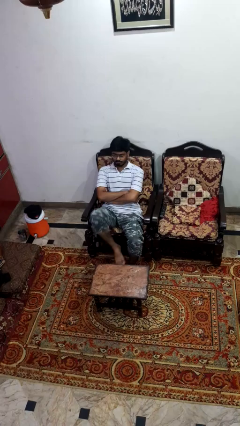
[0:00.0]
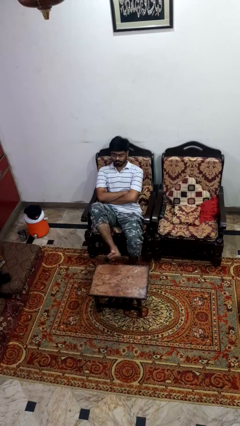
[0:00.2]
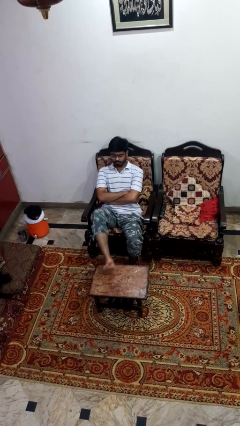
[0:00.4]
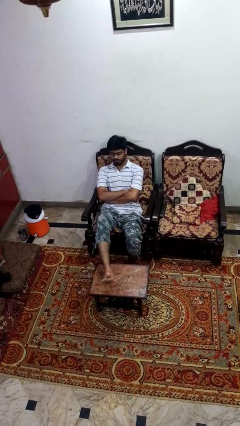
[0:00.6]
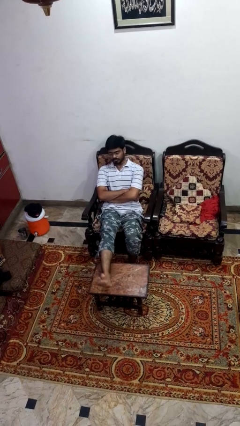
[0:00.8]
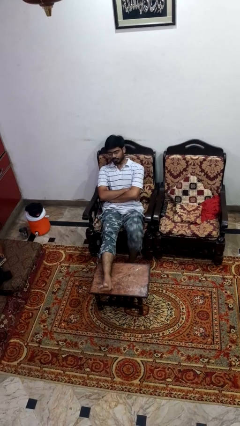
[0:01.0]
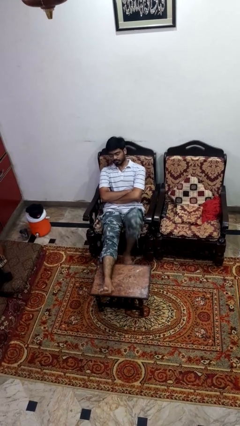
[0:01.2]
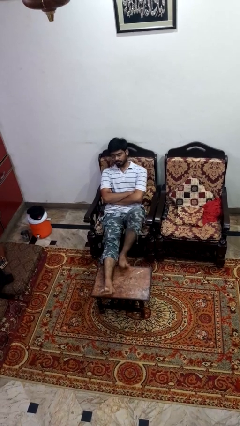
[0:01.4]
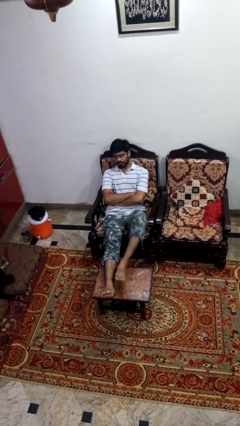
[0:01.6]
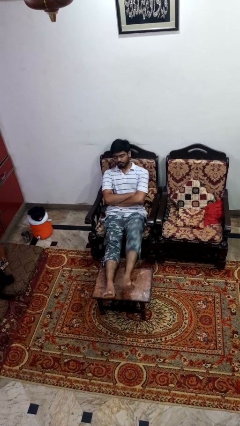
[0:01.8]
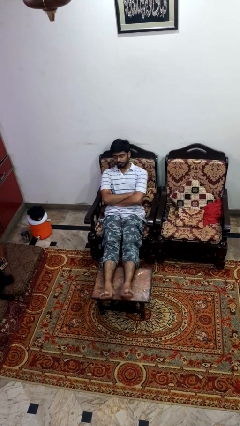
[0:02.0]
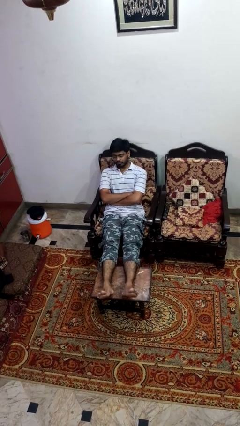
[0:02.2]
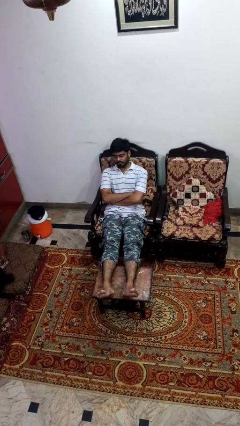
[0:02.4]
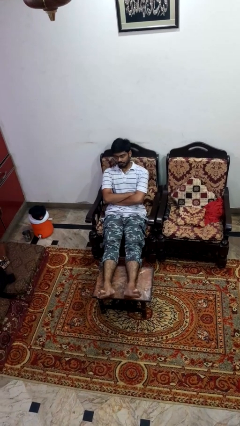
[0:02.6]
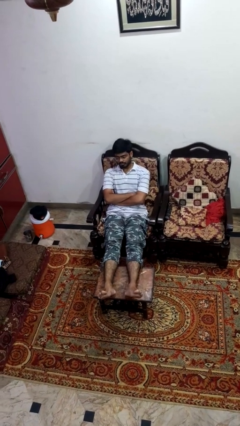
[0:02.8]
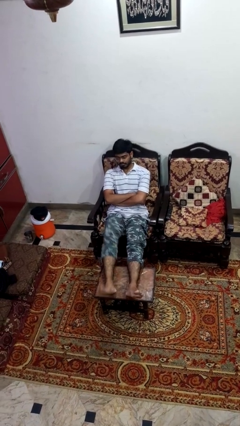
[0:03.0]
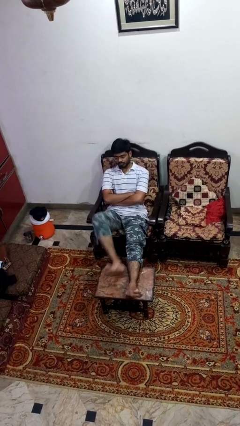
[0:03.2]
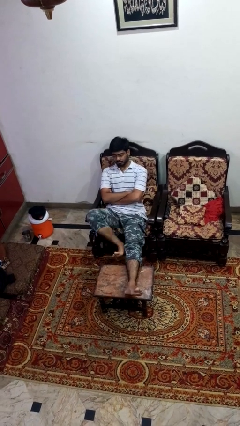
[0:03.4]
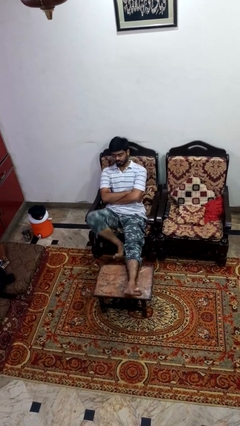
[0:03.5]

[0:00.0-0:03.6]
person puts feet up

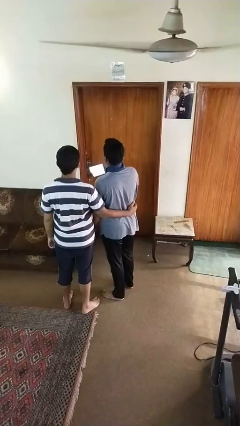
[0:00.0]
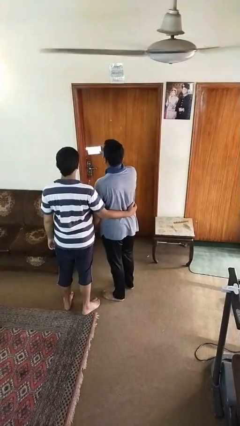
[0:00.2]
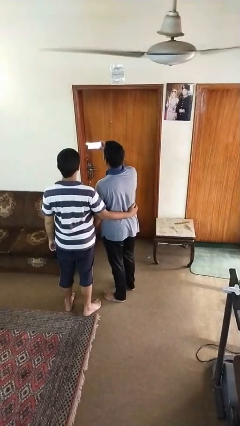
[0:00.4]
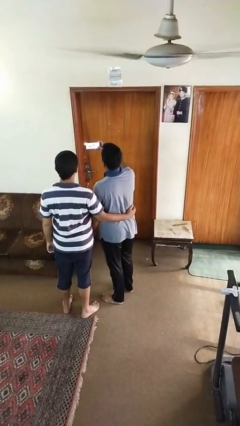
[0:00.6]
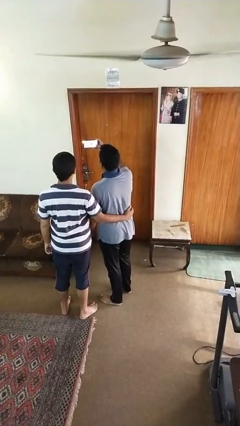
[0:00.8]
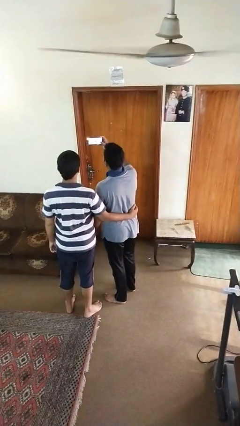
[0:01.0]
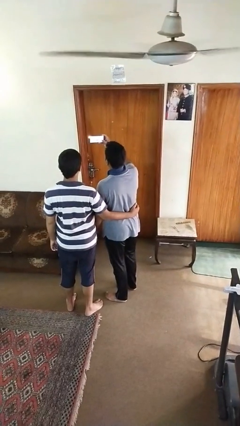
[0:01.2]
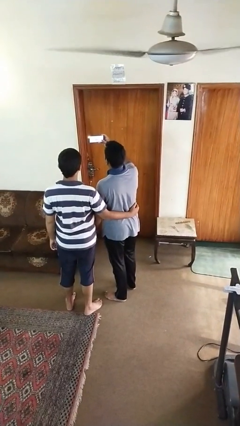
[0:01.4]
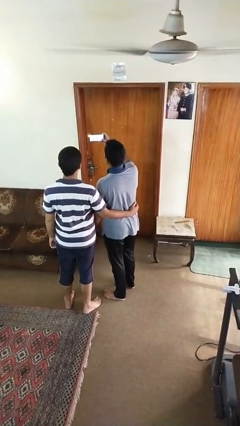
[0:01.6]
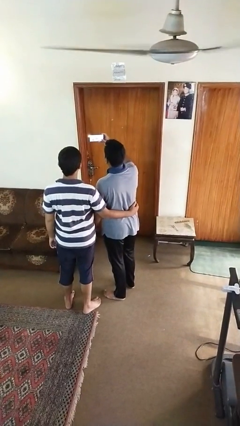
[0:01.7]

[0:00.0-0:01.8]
person takes selfie with person

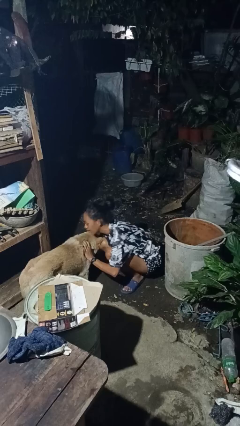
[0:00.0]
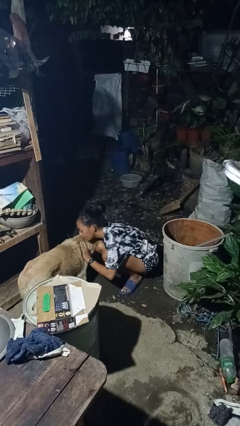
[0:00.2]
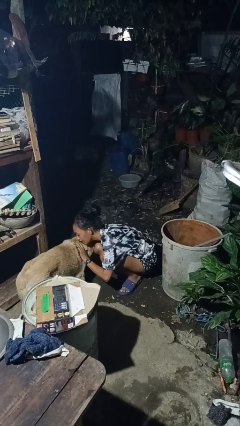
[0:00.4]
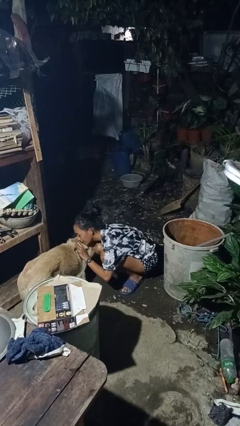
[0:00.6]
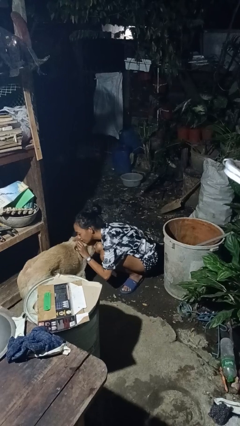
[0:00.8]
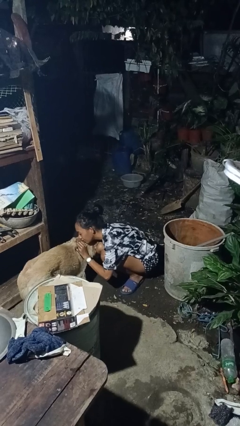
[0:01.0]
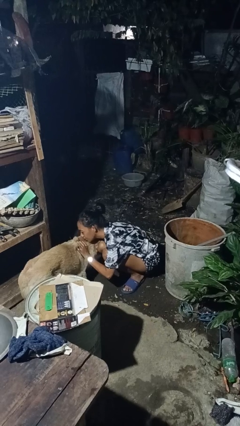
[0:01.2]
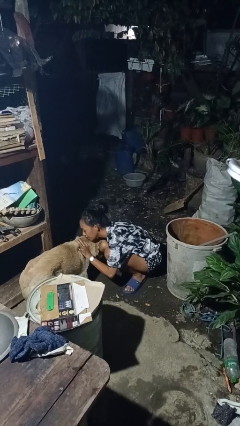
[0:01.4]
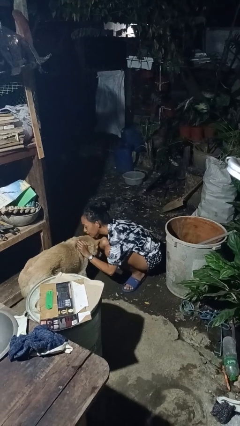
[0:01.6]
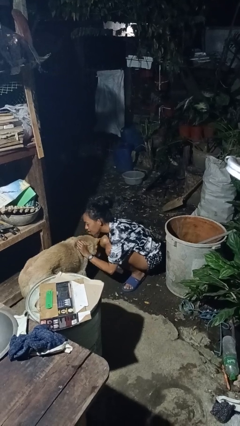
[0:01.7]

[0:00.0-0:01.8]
person hugs dog

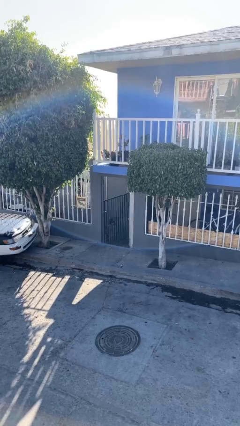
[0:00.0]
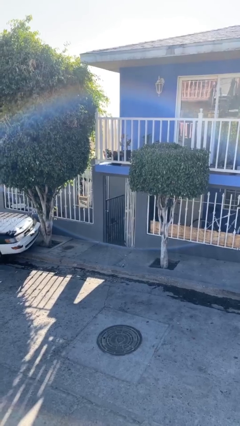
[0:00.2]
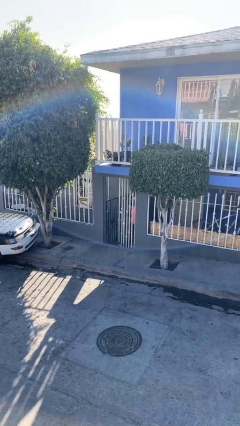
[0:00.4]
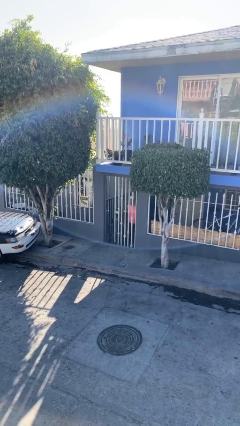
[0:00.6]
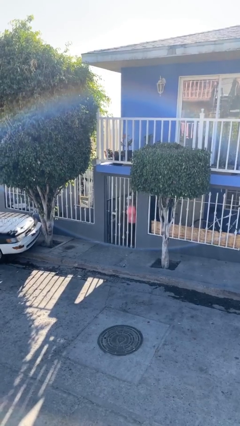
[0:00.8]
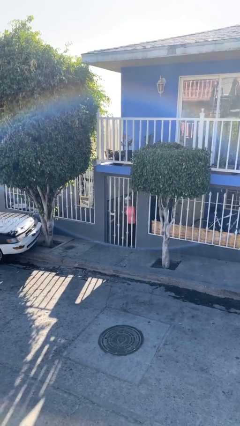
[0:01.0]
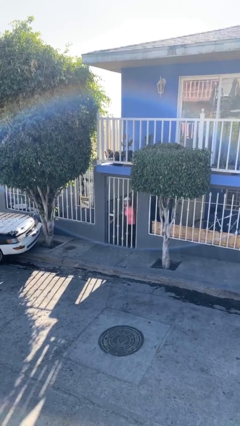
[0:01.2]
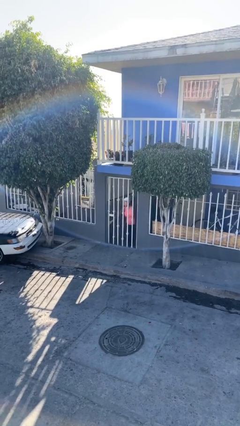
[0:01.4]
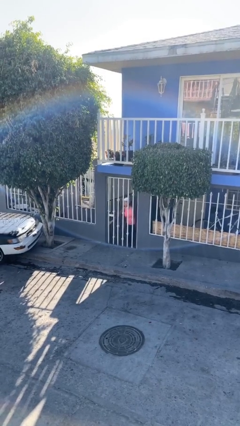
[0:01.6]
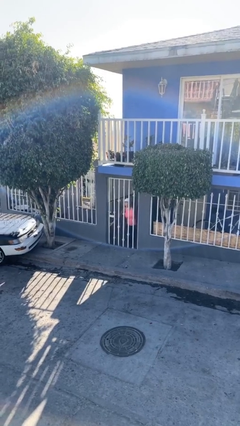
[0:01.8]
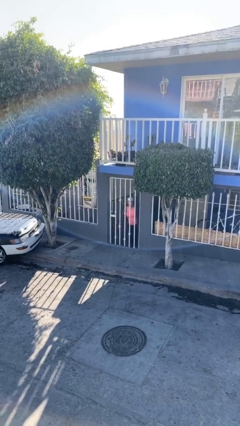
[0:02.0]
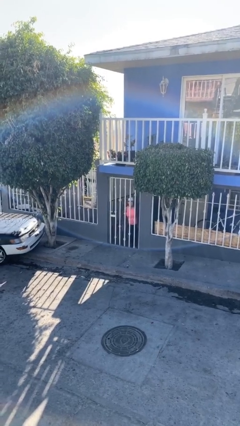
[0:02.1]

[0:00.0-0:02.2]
person closes facility door

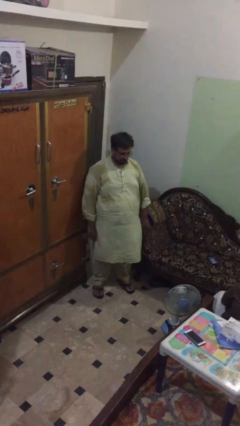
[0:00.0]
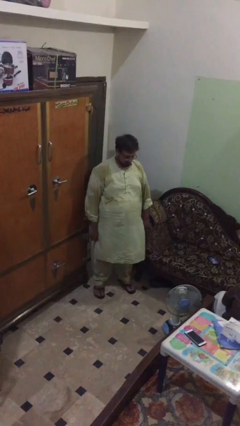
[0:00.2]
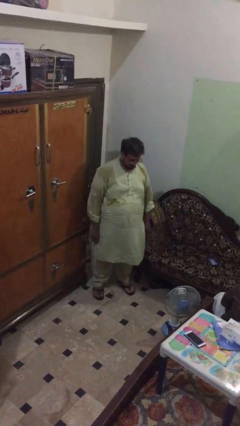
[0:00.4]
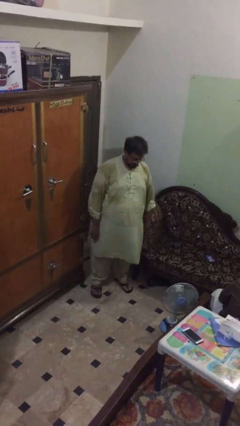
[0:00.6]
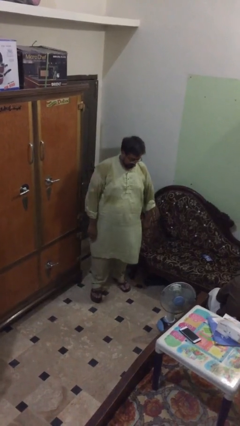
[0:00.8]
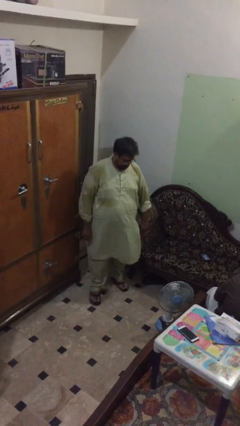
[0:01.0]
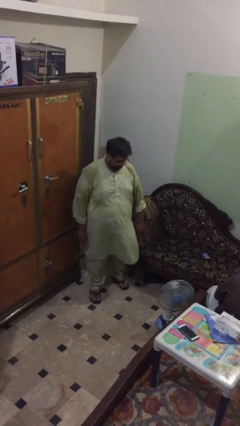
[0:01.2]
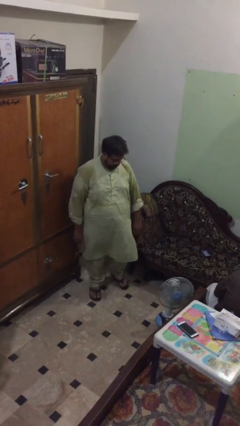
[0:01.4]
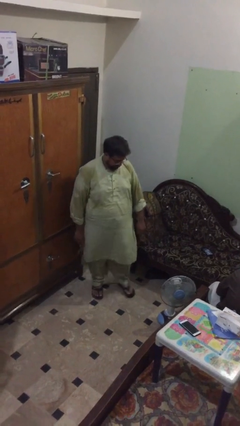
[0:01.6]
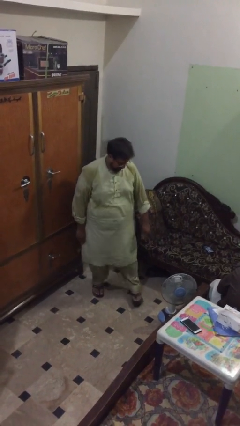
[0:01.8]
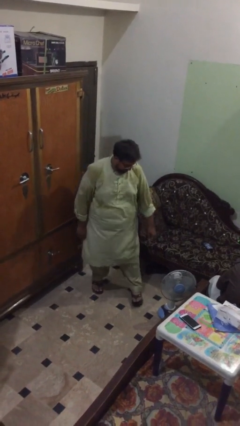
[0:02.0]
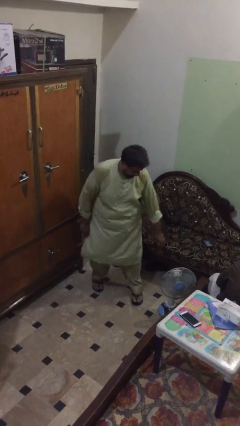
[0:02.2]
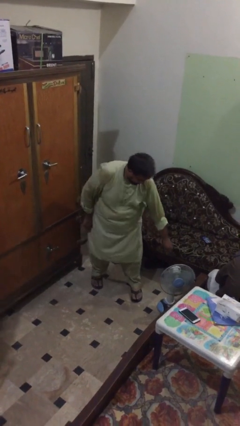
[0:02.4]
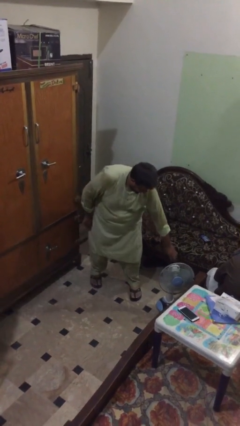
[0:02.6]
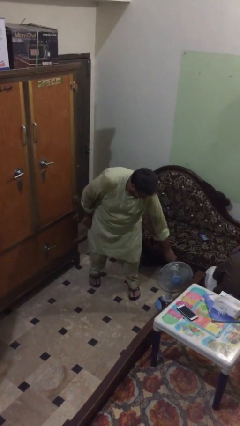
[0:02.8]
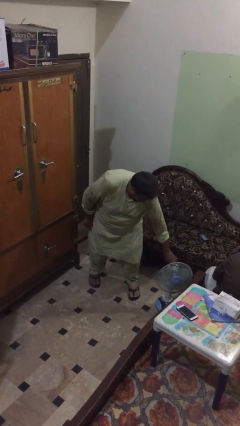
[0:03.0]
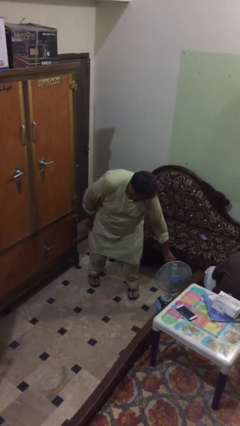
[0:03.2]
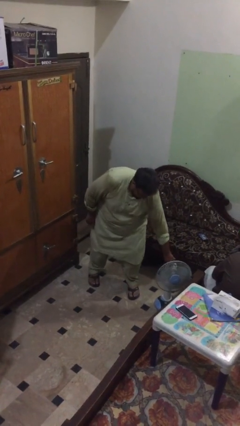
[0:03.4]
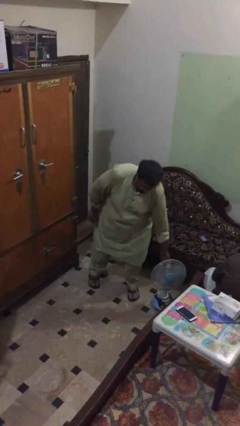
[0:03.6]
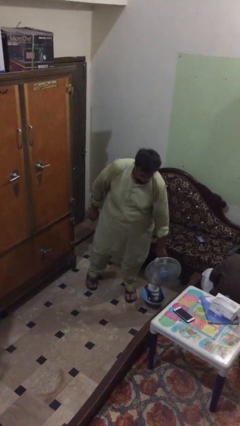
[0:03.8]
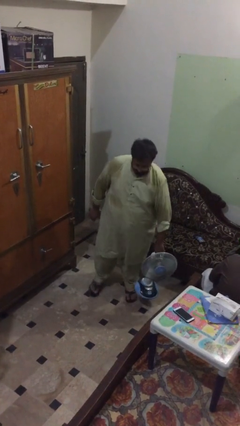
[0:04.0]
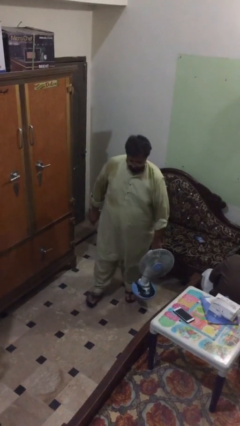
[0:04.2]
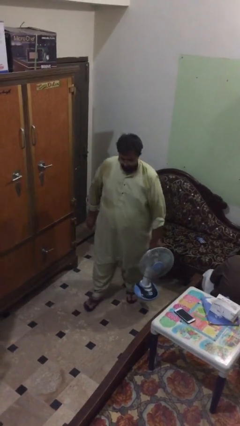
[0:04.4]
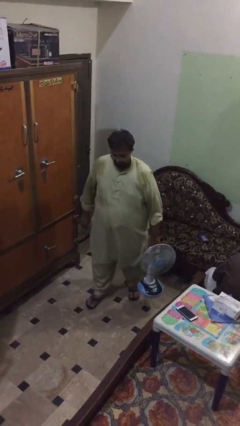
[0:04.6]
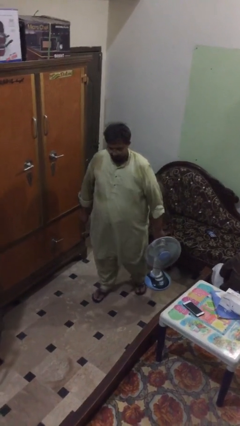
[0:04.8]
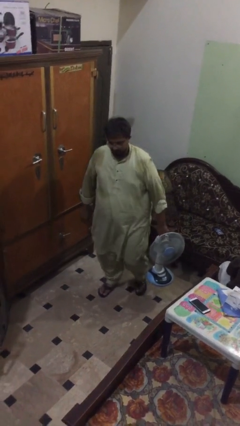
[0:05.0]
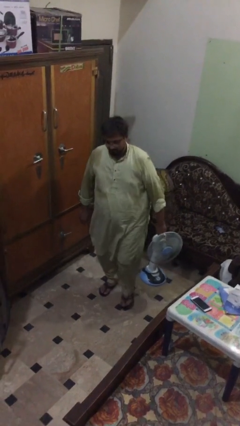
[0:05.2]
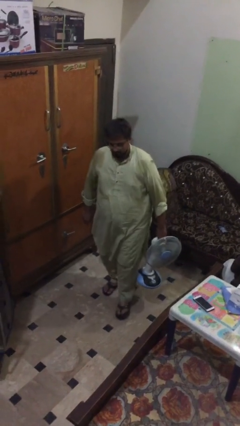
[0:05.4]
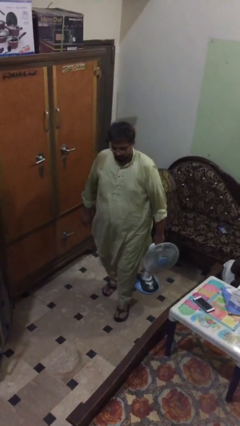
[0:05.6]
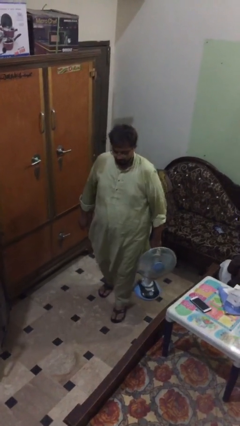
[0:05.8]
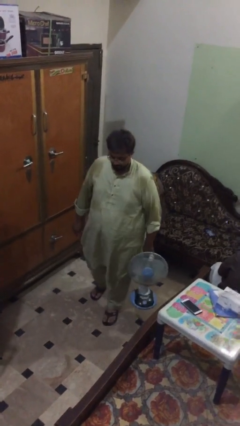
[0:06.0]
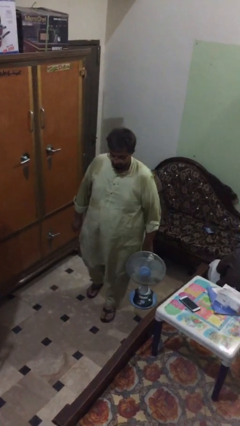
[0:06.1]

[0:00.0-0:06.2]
person steals object from person

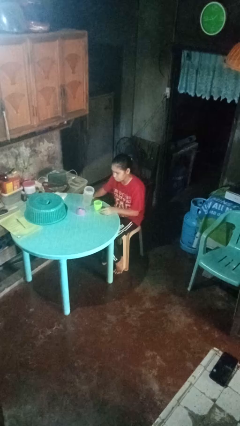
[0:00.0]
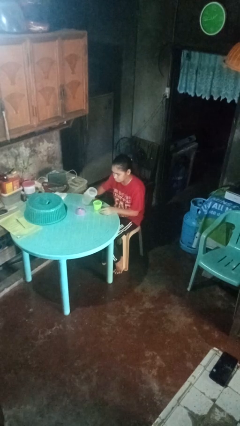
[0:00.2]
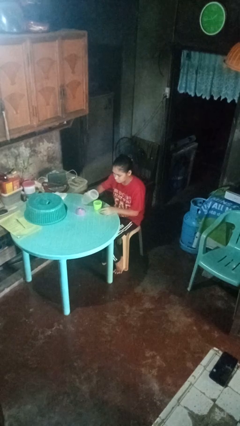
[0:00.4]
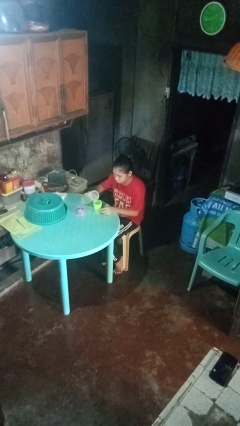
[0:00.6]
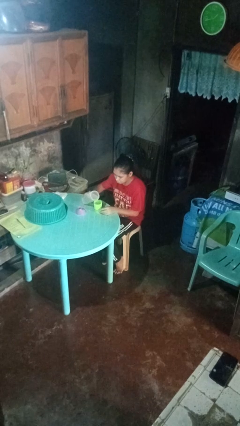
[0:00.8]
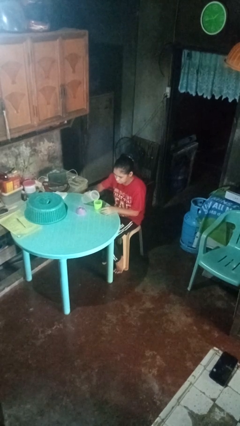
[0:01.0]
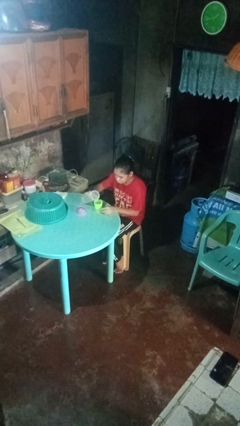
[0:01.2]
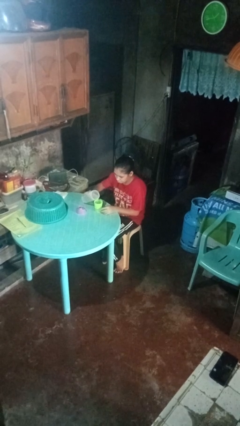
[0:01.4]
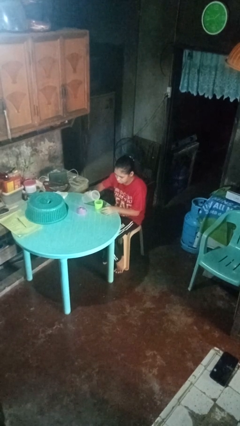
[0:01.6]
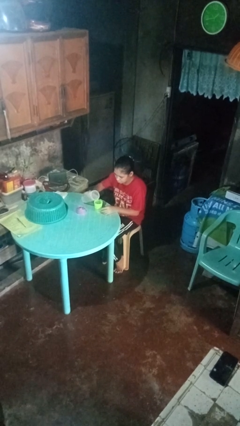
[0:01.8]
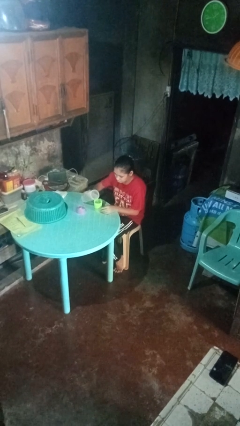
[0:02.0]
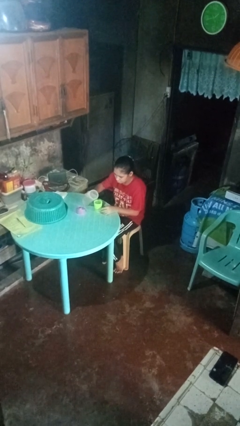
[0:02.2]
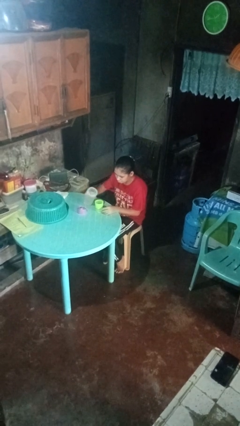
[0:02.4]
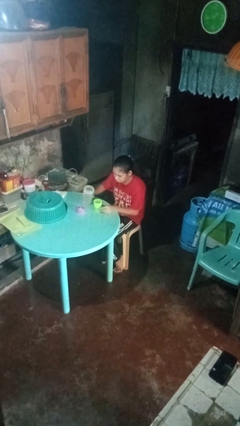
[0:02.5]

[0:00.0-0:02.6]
person pours liquid into cup
